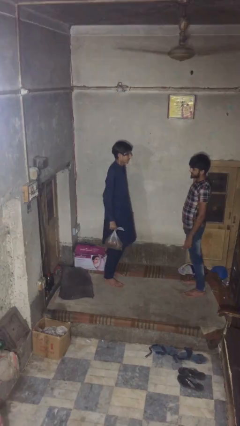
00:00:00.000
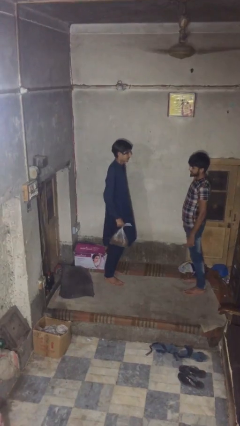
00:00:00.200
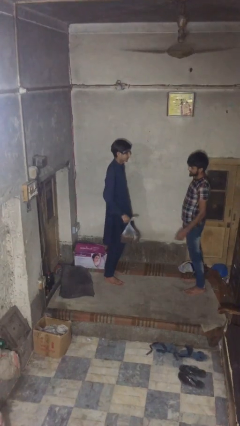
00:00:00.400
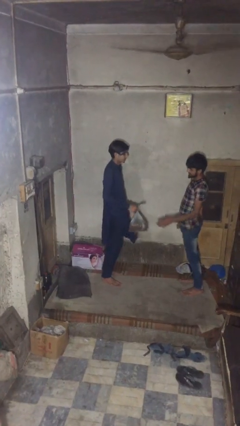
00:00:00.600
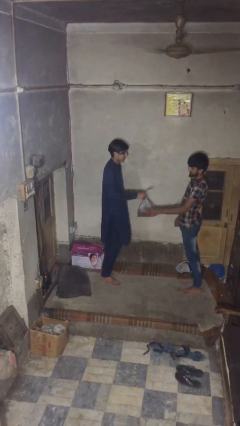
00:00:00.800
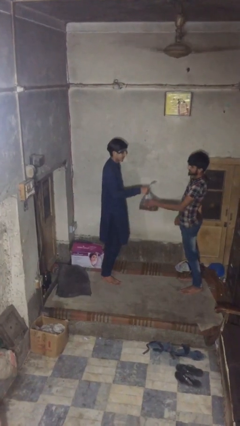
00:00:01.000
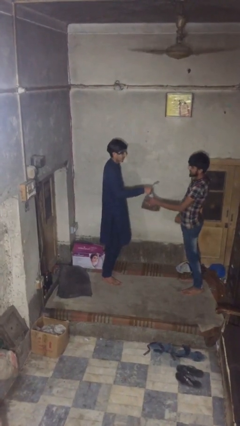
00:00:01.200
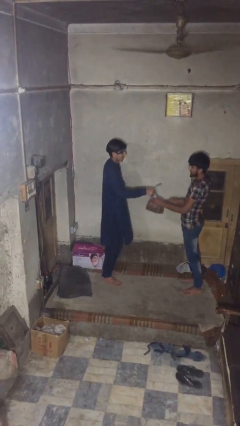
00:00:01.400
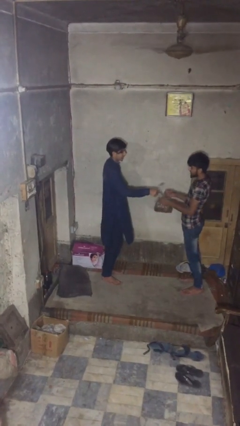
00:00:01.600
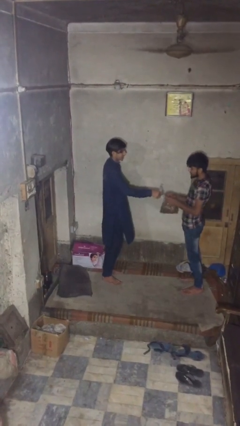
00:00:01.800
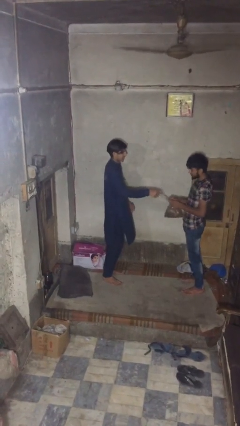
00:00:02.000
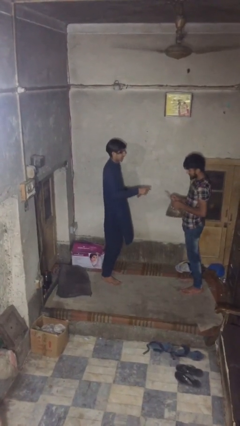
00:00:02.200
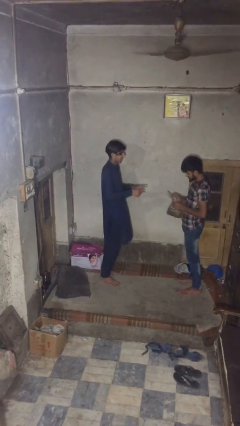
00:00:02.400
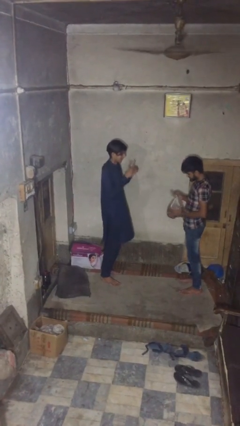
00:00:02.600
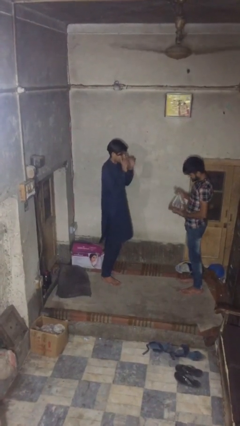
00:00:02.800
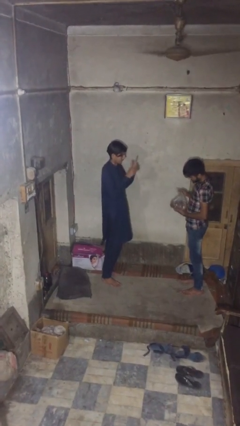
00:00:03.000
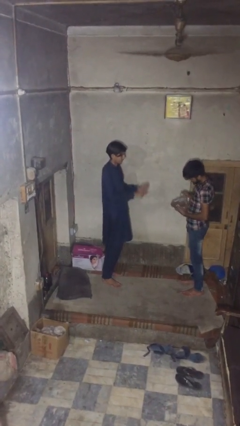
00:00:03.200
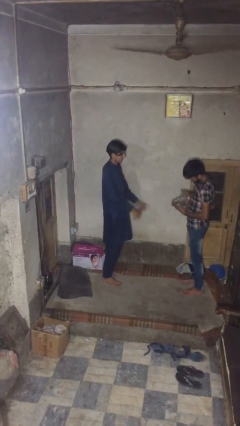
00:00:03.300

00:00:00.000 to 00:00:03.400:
person transfers object to person

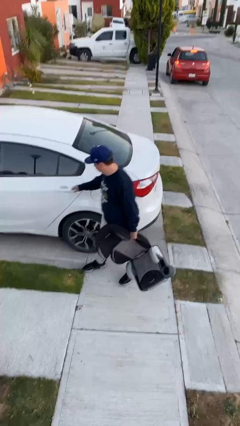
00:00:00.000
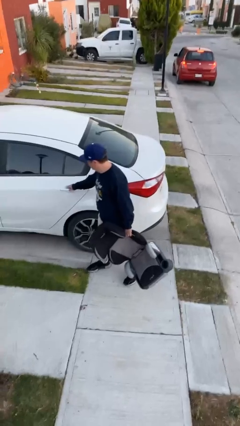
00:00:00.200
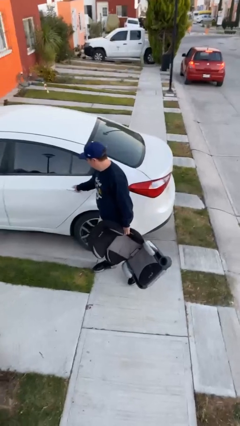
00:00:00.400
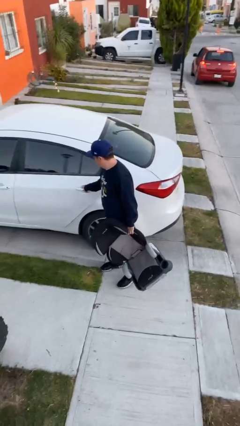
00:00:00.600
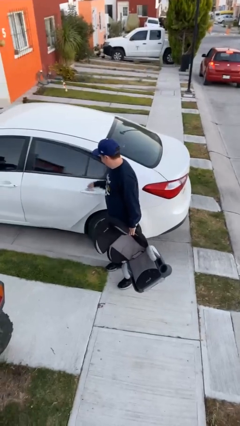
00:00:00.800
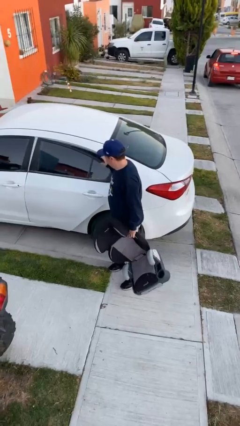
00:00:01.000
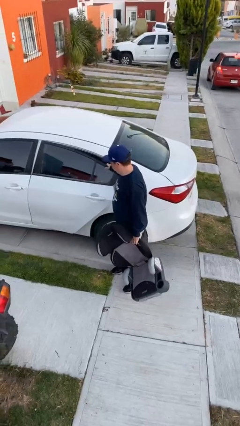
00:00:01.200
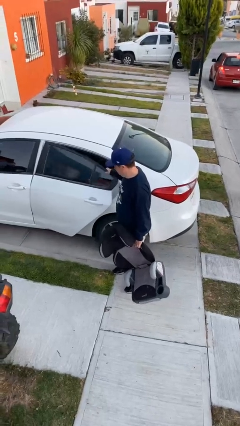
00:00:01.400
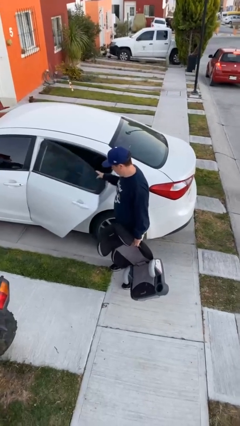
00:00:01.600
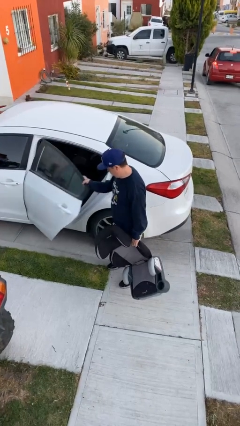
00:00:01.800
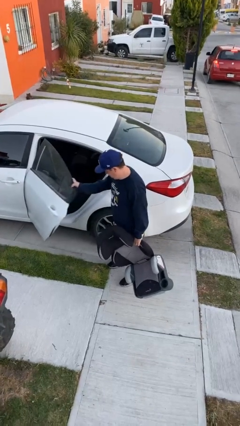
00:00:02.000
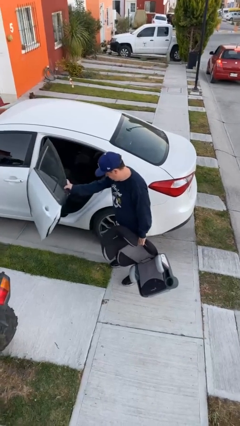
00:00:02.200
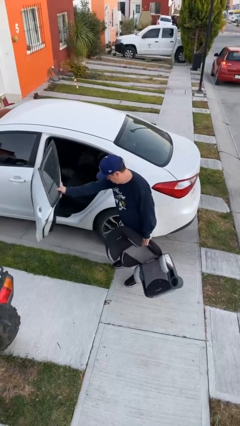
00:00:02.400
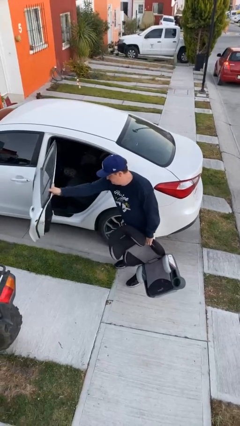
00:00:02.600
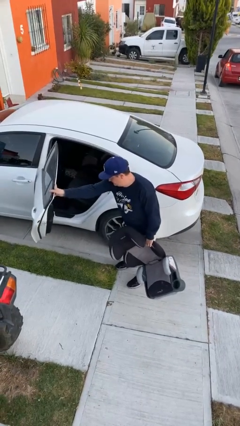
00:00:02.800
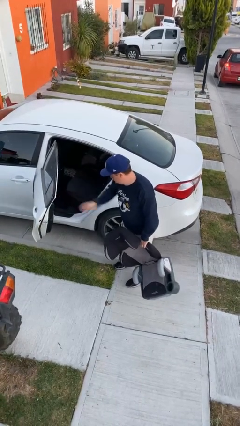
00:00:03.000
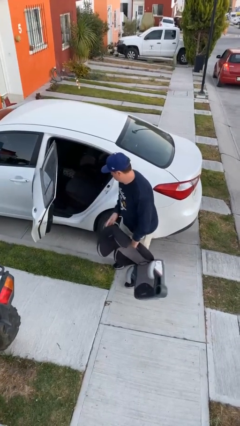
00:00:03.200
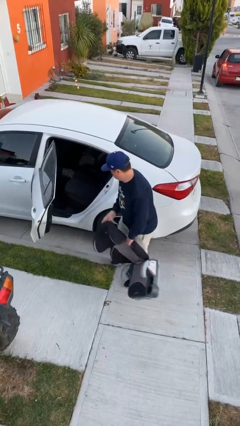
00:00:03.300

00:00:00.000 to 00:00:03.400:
person opens car door

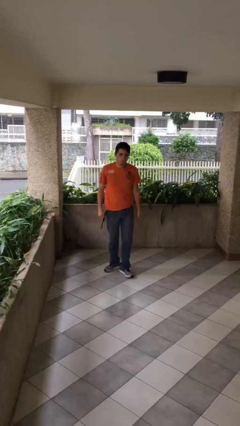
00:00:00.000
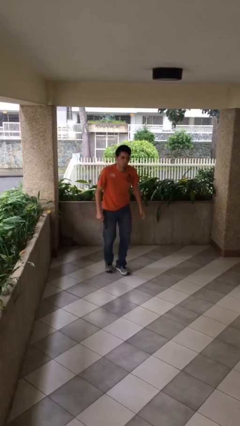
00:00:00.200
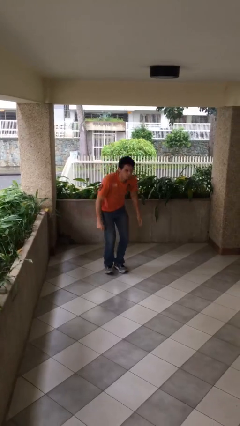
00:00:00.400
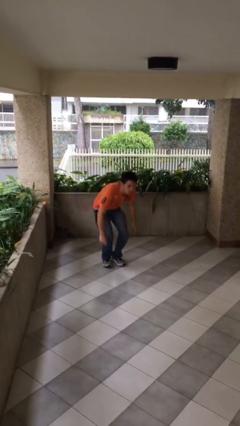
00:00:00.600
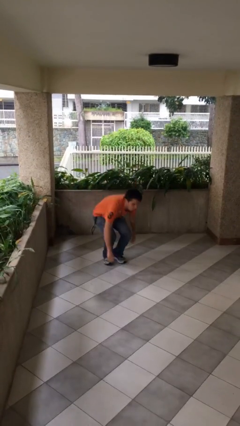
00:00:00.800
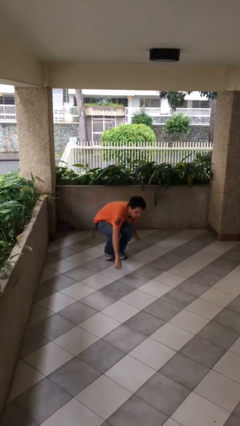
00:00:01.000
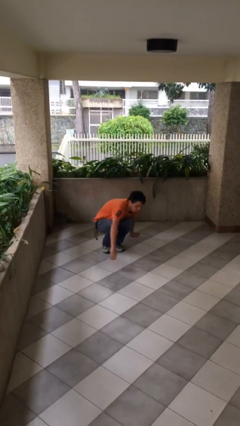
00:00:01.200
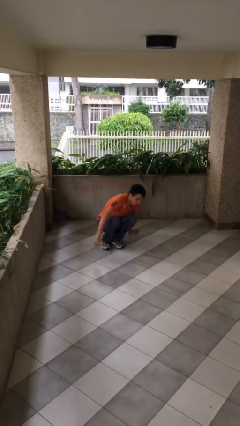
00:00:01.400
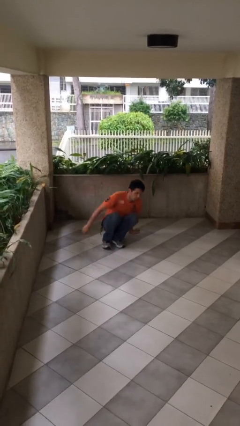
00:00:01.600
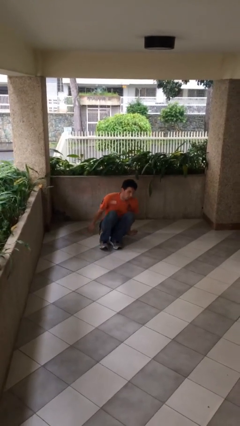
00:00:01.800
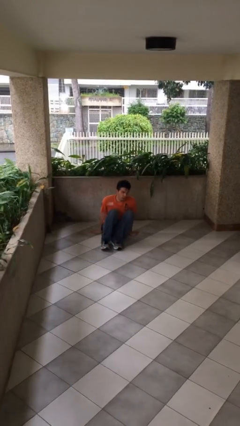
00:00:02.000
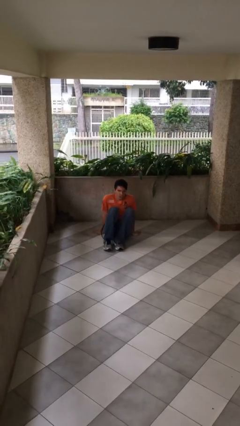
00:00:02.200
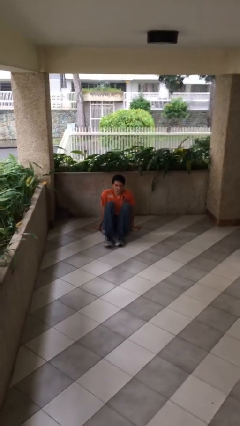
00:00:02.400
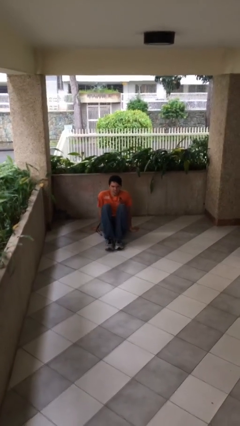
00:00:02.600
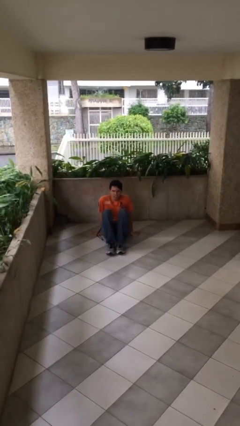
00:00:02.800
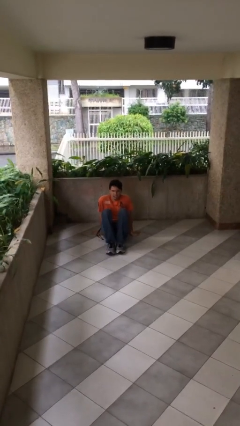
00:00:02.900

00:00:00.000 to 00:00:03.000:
person sits down

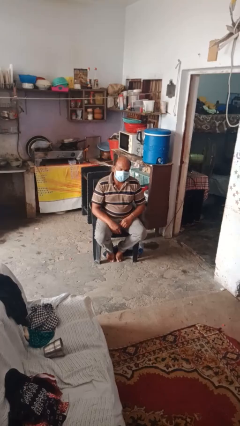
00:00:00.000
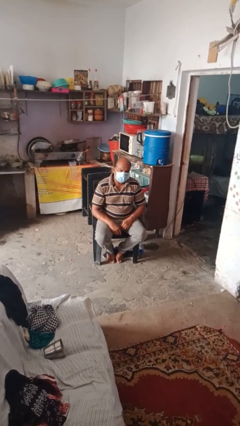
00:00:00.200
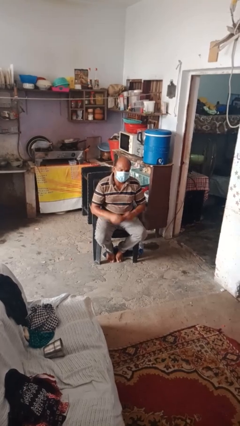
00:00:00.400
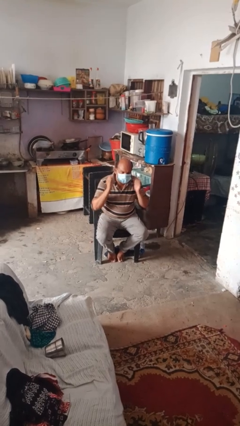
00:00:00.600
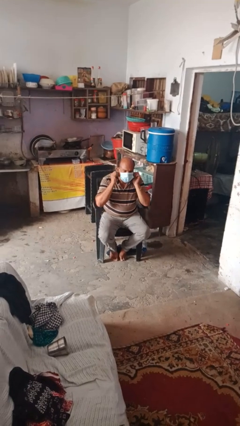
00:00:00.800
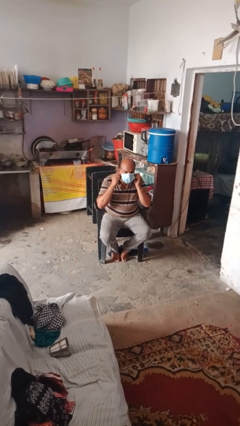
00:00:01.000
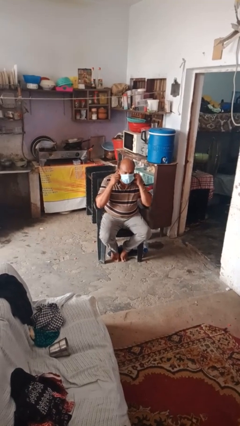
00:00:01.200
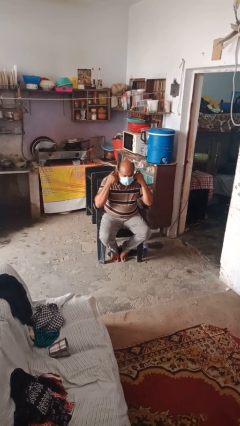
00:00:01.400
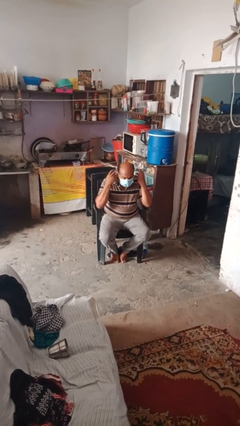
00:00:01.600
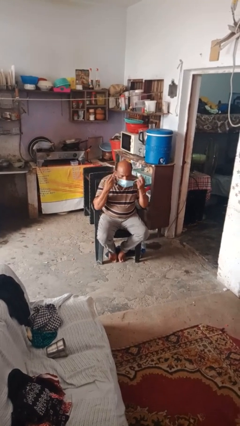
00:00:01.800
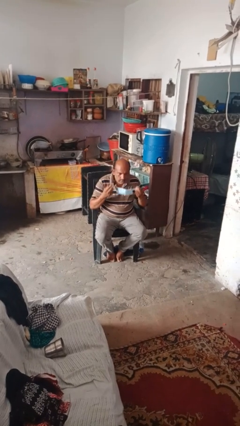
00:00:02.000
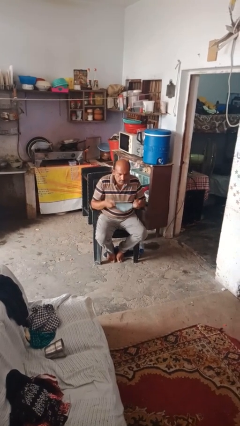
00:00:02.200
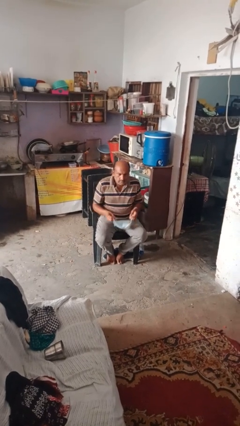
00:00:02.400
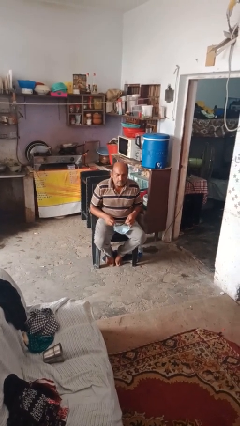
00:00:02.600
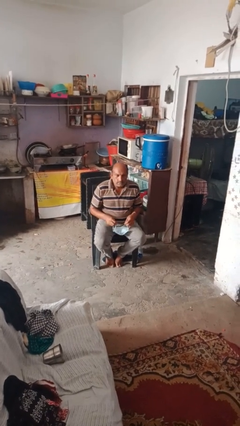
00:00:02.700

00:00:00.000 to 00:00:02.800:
person takes off facemask

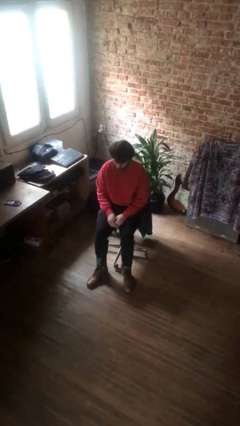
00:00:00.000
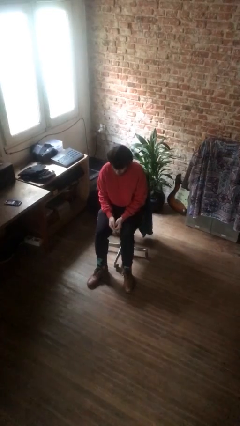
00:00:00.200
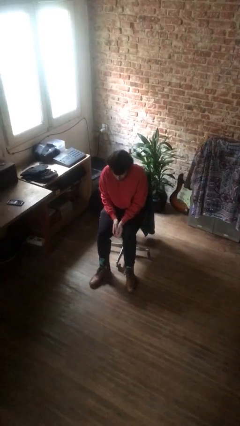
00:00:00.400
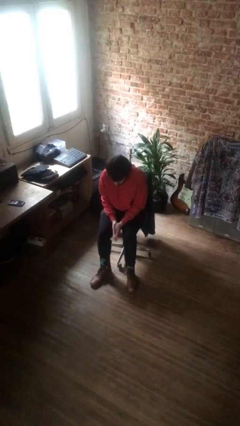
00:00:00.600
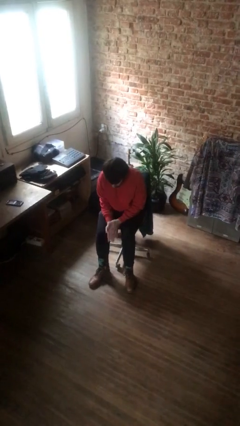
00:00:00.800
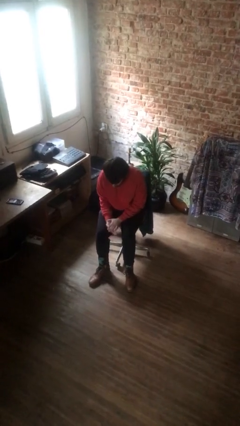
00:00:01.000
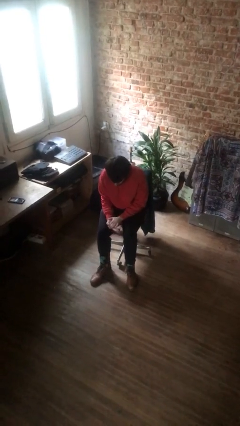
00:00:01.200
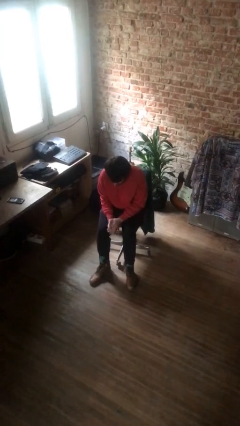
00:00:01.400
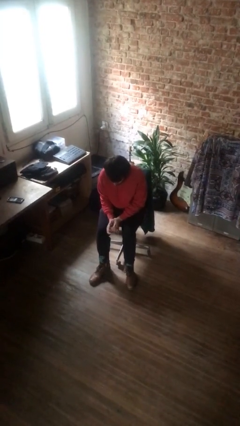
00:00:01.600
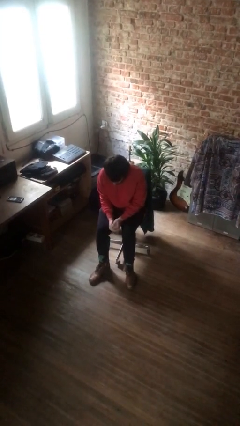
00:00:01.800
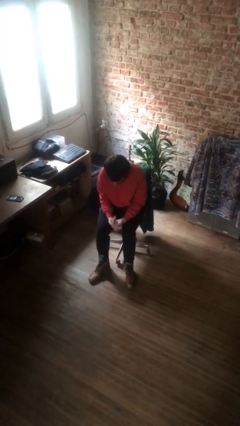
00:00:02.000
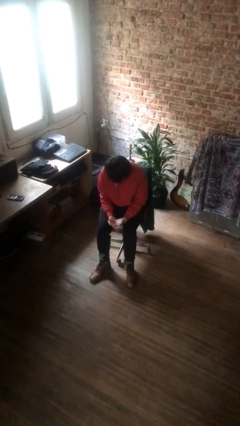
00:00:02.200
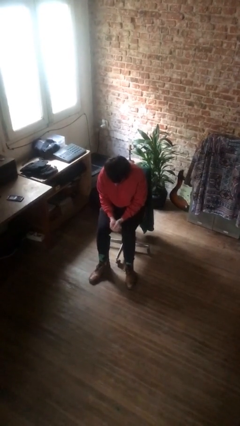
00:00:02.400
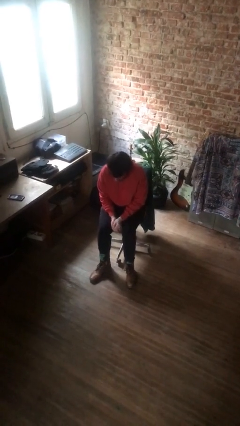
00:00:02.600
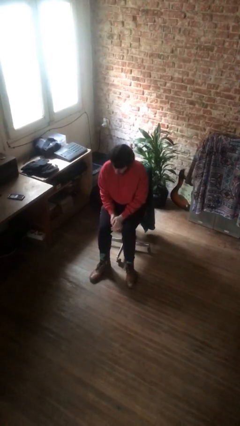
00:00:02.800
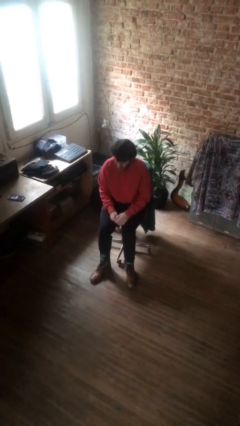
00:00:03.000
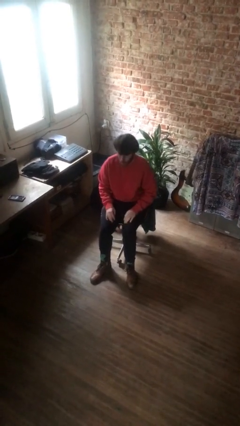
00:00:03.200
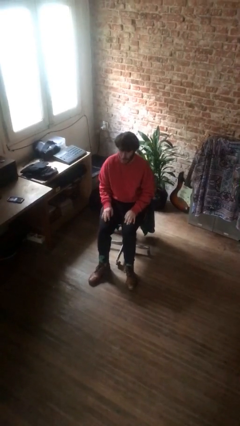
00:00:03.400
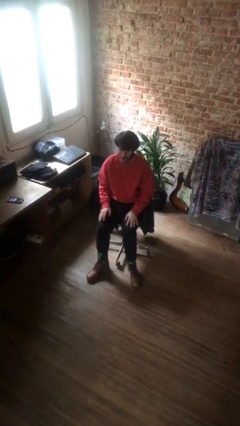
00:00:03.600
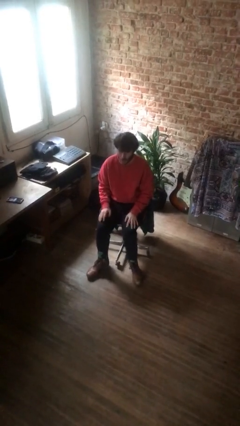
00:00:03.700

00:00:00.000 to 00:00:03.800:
person looks at hands in lap

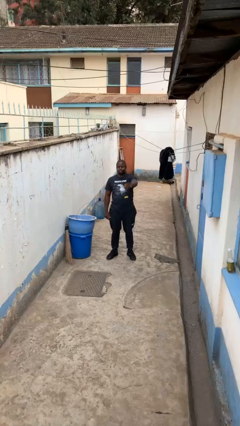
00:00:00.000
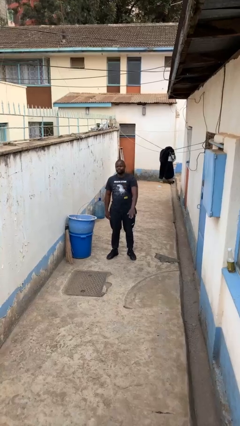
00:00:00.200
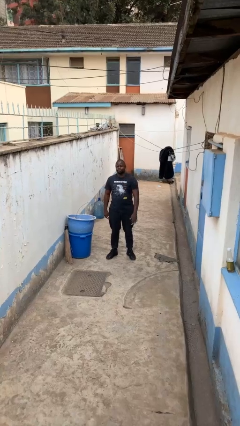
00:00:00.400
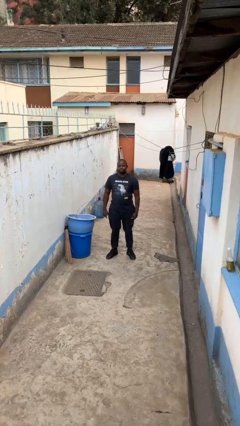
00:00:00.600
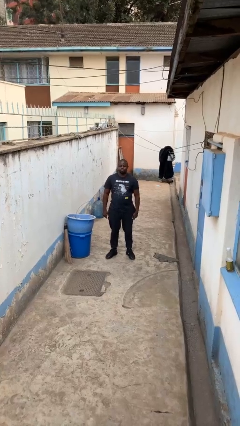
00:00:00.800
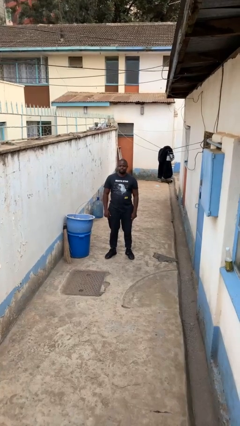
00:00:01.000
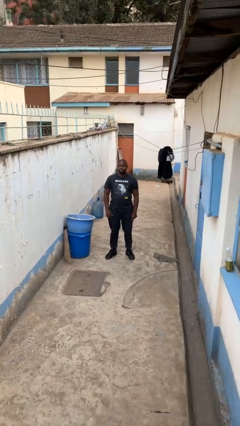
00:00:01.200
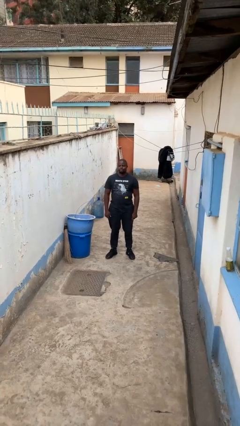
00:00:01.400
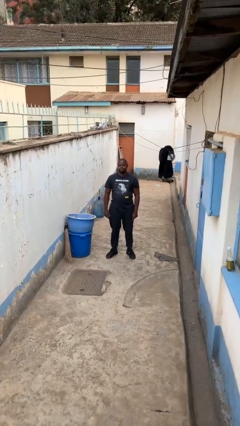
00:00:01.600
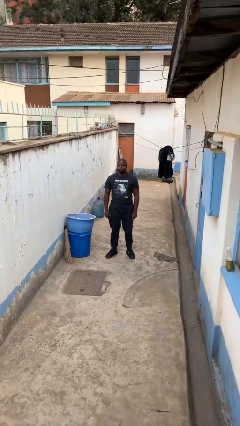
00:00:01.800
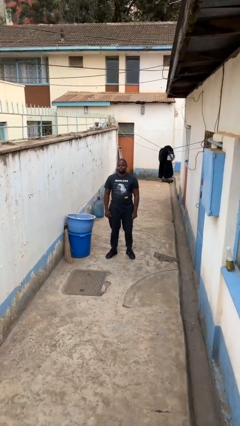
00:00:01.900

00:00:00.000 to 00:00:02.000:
person gestures swipe down
